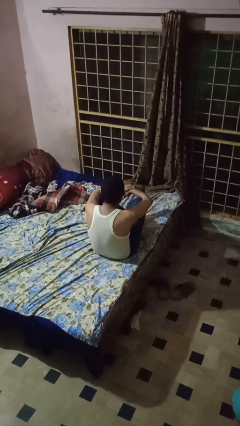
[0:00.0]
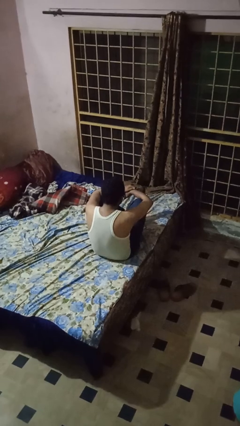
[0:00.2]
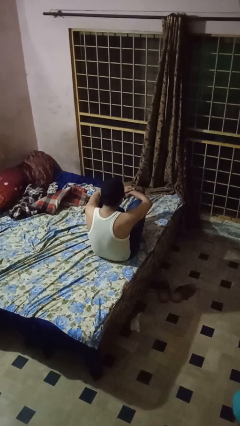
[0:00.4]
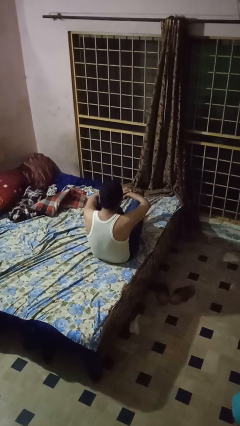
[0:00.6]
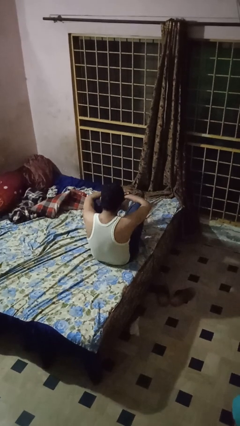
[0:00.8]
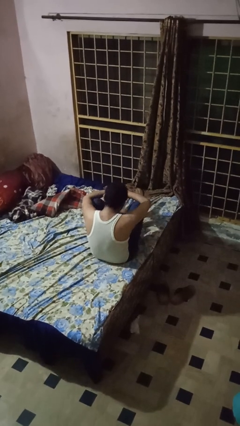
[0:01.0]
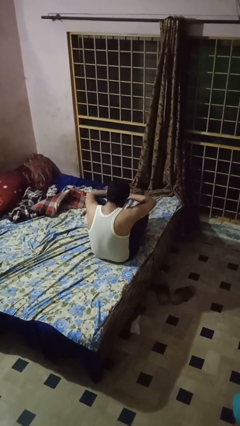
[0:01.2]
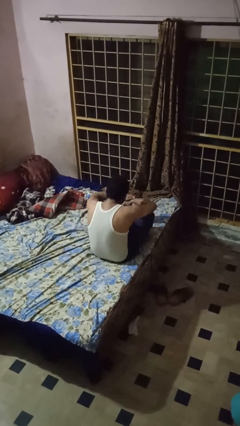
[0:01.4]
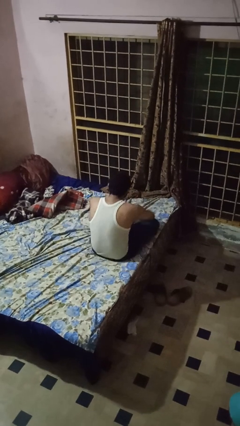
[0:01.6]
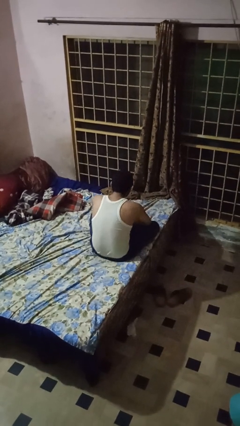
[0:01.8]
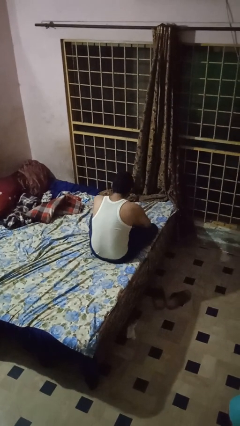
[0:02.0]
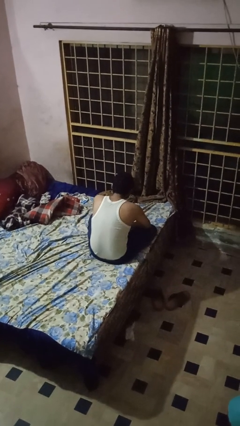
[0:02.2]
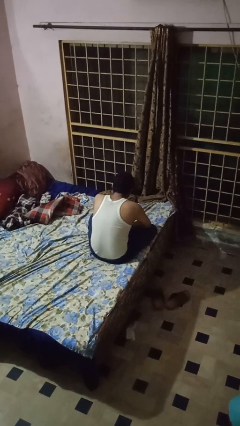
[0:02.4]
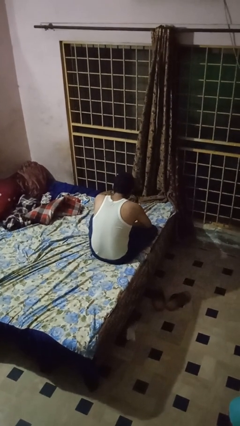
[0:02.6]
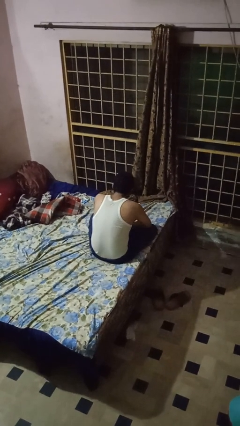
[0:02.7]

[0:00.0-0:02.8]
person crosses legs

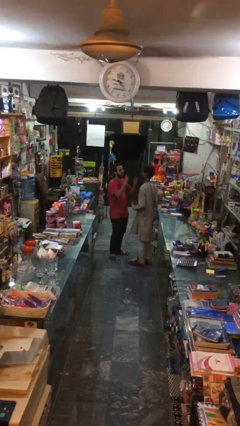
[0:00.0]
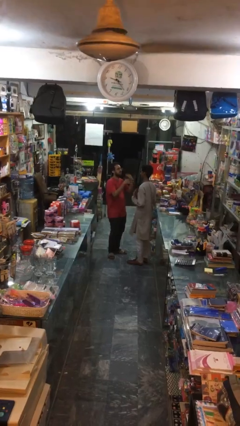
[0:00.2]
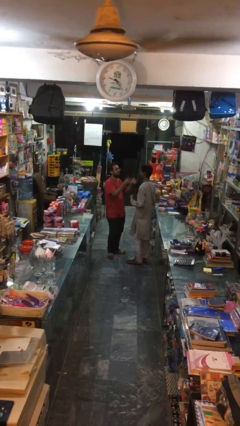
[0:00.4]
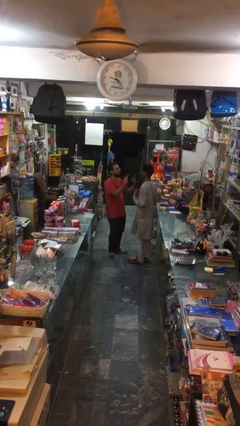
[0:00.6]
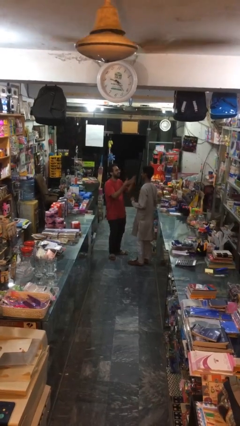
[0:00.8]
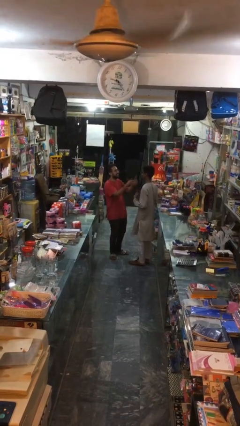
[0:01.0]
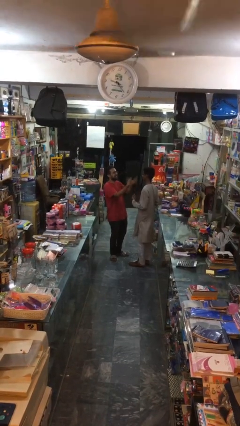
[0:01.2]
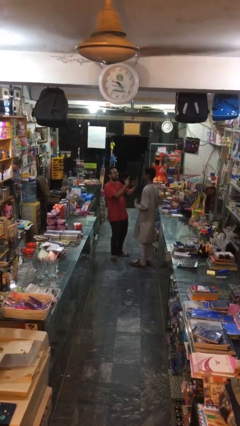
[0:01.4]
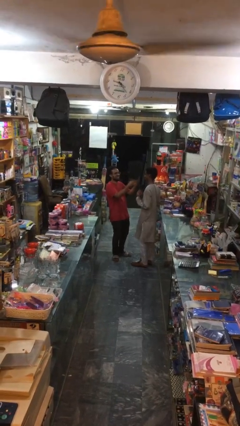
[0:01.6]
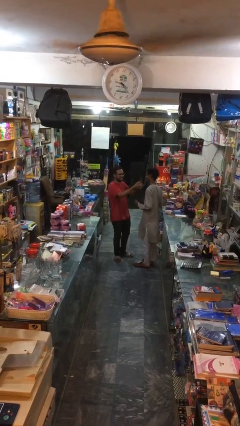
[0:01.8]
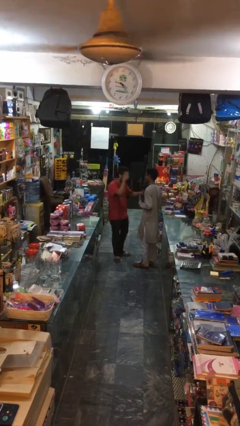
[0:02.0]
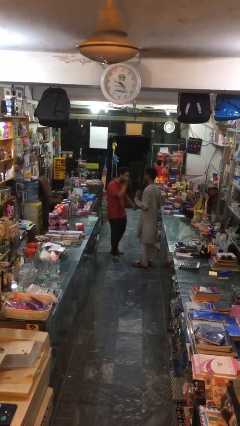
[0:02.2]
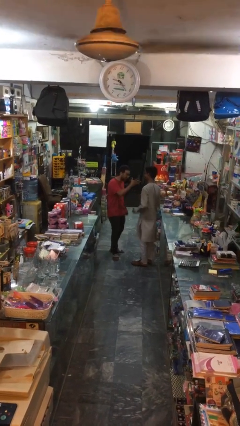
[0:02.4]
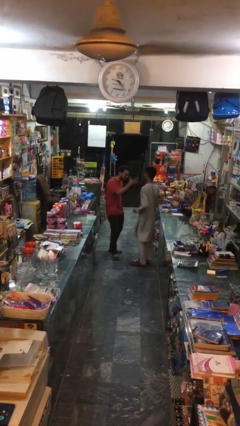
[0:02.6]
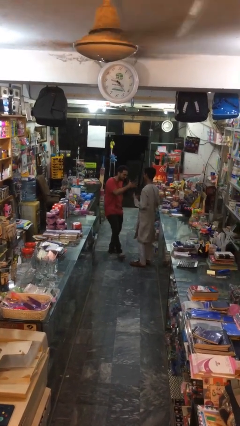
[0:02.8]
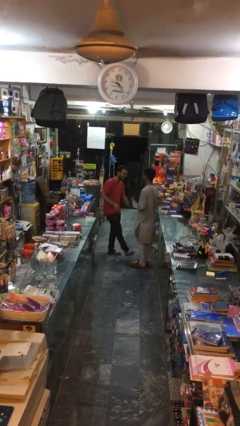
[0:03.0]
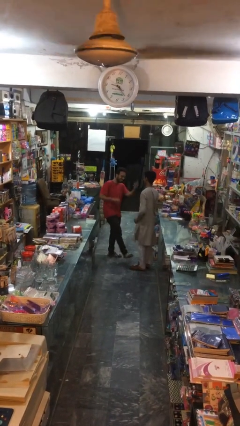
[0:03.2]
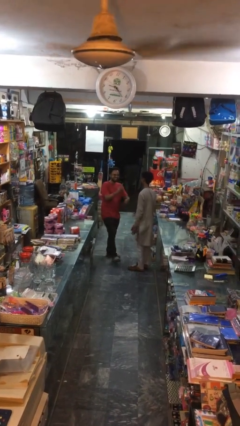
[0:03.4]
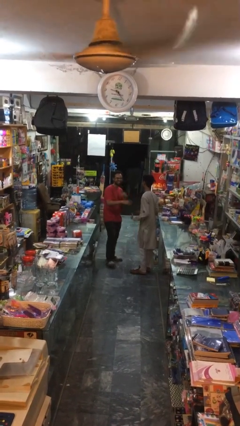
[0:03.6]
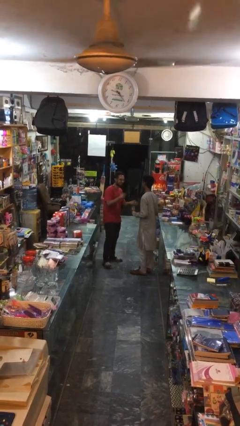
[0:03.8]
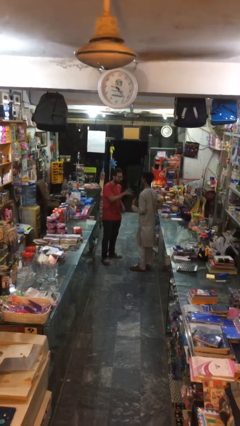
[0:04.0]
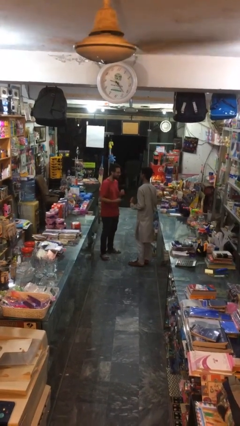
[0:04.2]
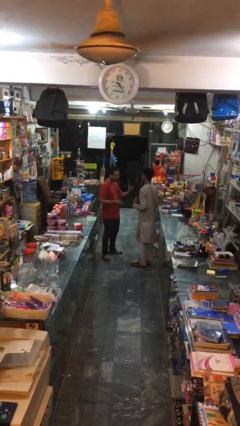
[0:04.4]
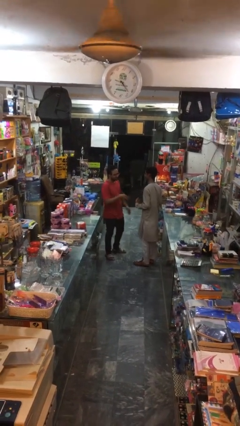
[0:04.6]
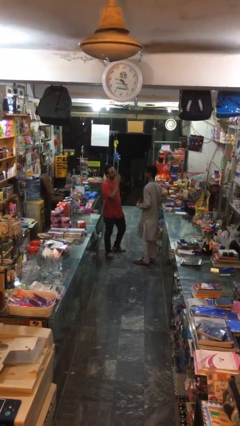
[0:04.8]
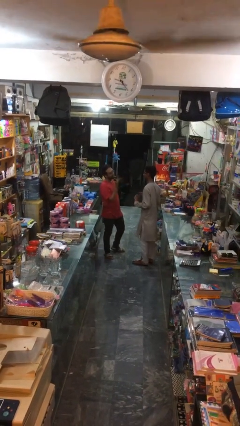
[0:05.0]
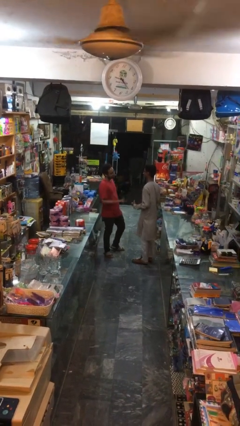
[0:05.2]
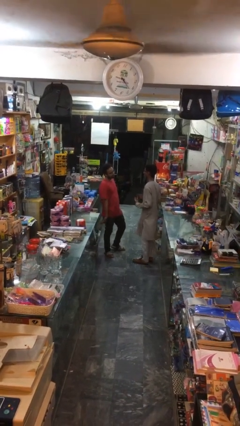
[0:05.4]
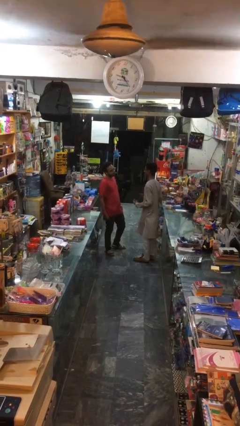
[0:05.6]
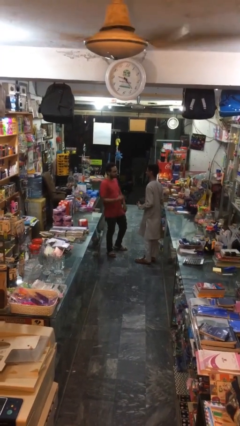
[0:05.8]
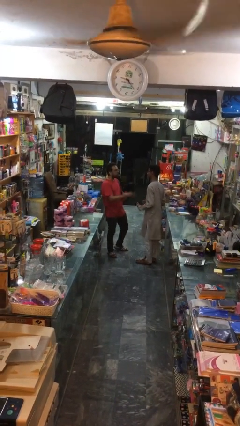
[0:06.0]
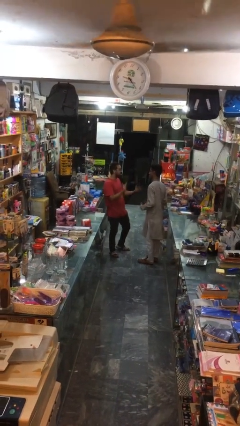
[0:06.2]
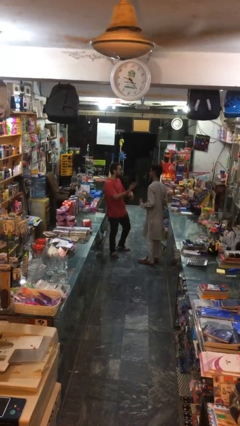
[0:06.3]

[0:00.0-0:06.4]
person talks to person

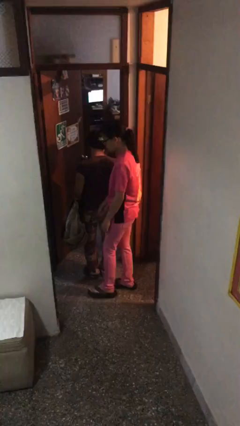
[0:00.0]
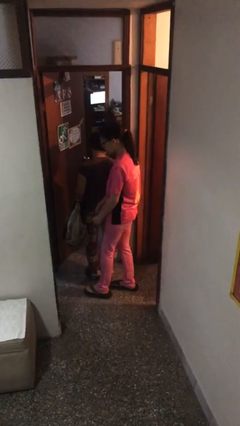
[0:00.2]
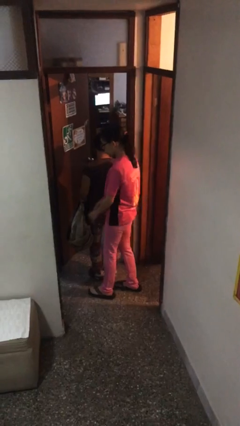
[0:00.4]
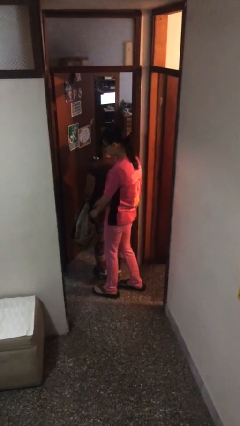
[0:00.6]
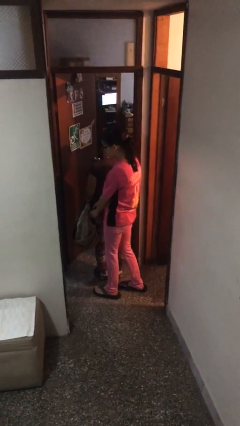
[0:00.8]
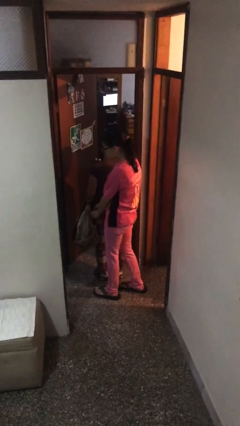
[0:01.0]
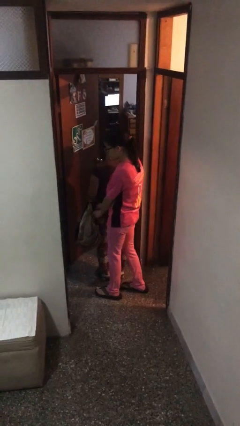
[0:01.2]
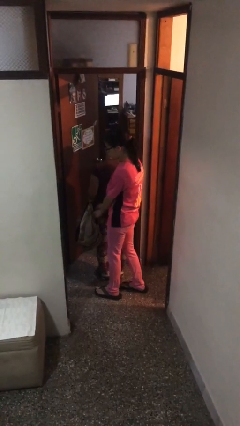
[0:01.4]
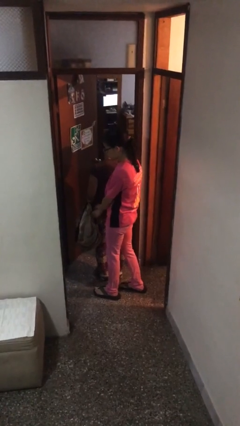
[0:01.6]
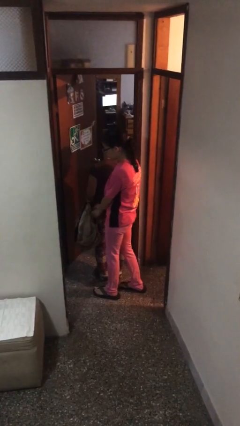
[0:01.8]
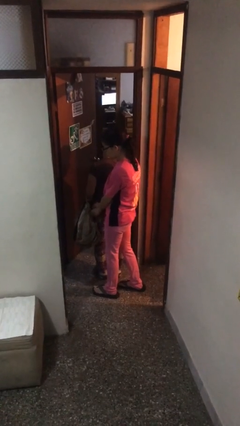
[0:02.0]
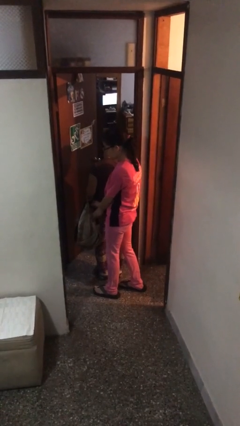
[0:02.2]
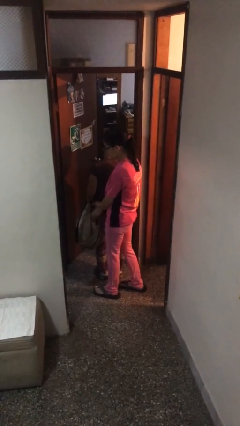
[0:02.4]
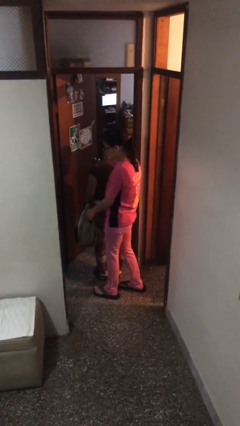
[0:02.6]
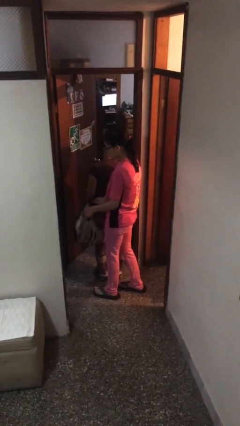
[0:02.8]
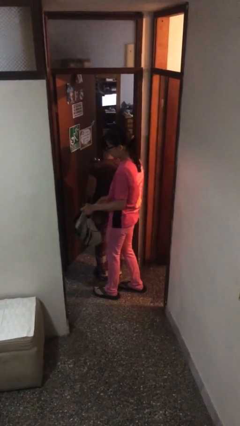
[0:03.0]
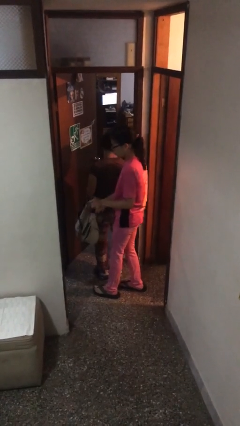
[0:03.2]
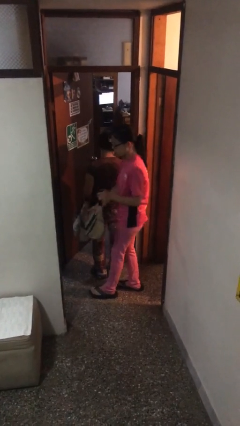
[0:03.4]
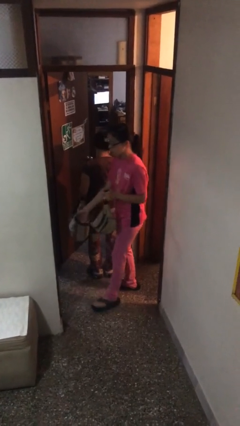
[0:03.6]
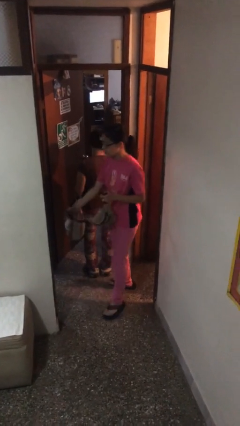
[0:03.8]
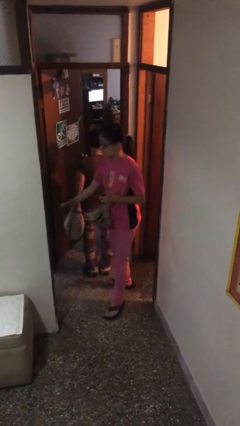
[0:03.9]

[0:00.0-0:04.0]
person steals object from person

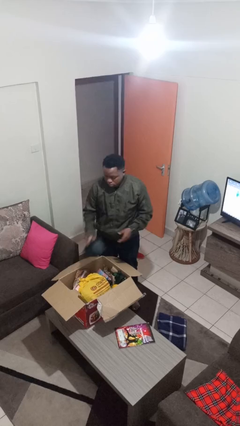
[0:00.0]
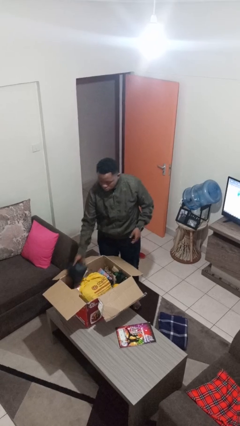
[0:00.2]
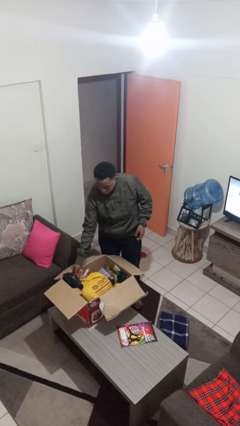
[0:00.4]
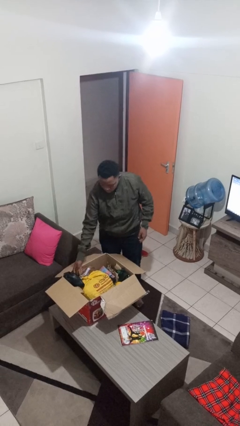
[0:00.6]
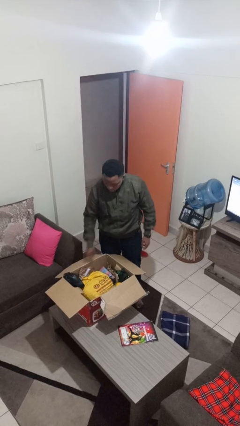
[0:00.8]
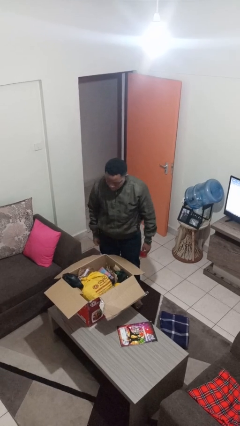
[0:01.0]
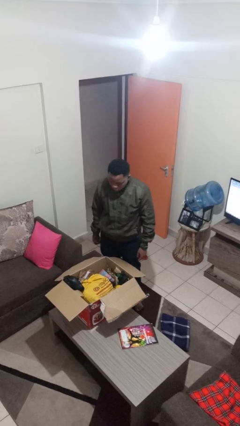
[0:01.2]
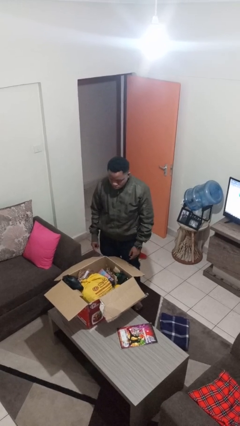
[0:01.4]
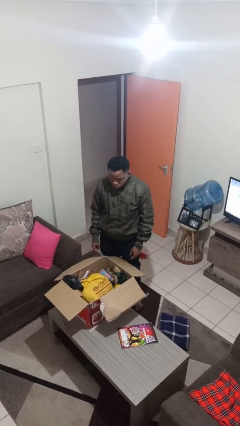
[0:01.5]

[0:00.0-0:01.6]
person puts object into box

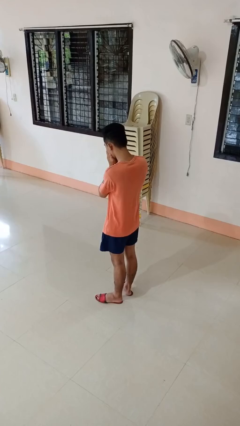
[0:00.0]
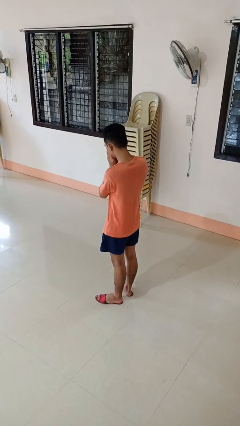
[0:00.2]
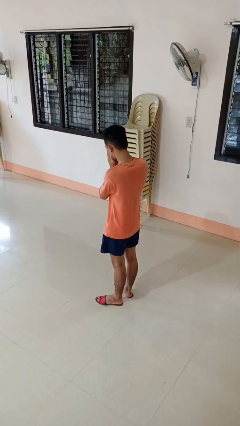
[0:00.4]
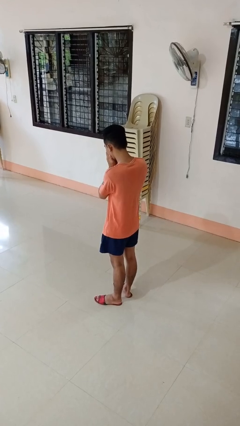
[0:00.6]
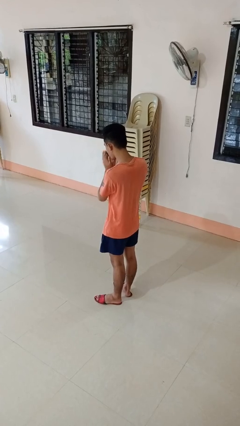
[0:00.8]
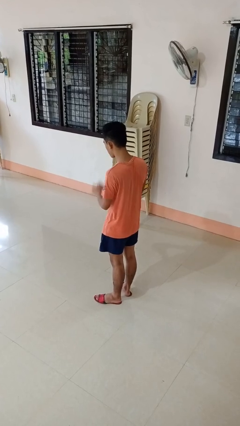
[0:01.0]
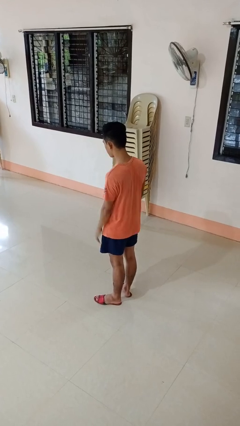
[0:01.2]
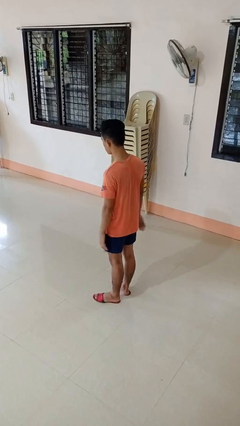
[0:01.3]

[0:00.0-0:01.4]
person sneezes into hand

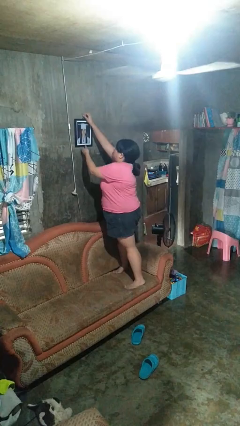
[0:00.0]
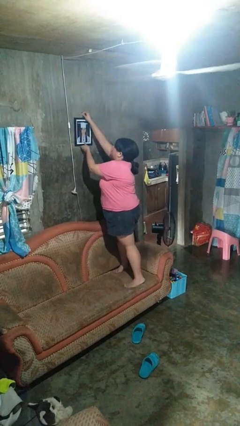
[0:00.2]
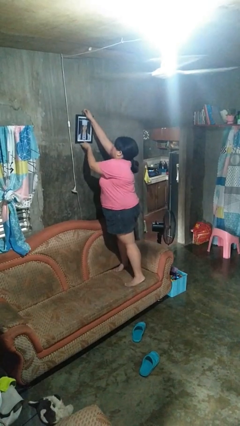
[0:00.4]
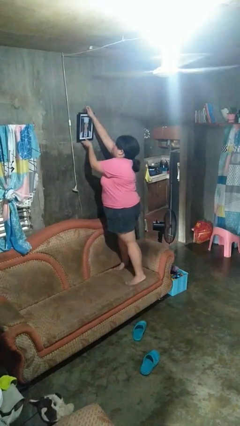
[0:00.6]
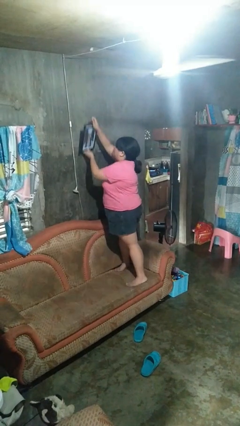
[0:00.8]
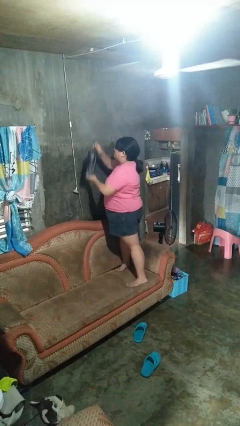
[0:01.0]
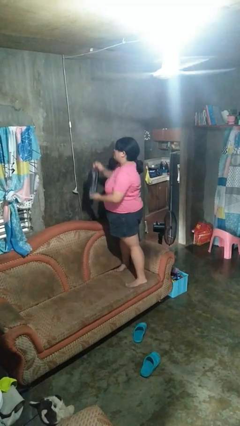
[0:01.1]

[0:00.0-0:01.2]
person takes down picture frame

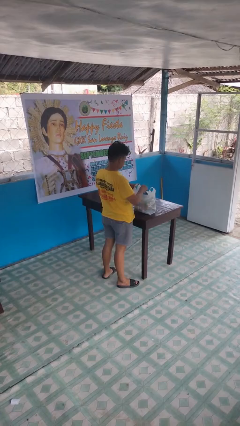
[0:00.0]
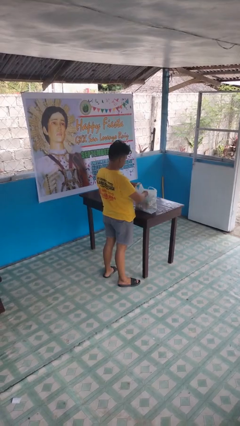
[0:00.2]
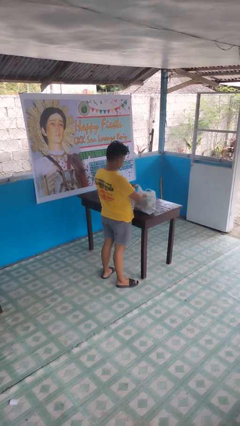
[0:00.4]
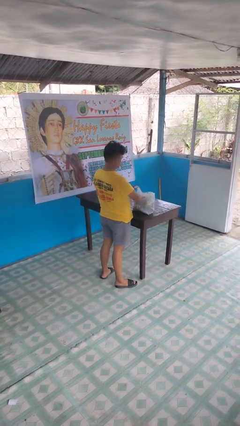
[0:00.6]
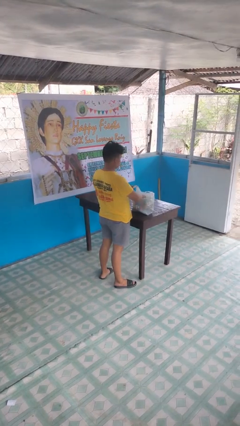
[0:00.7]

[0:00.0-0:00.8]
person puts object into bag
